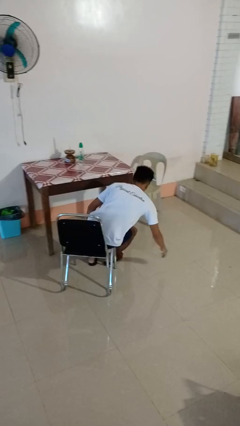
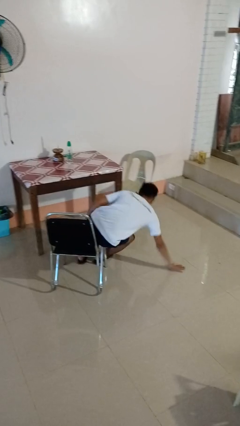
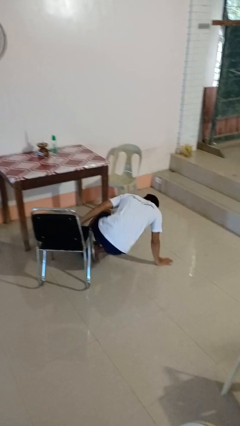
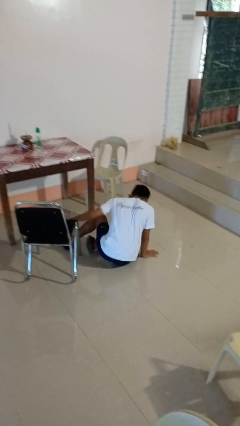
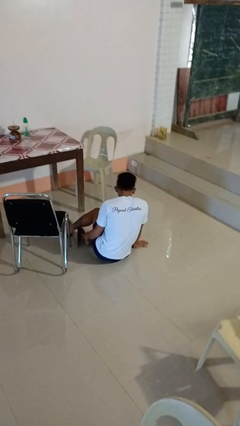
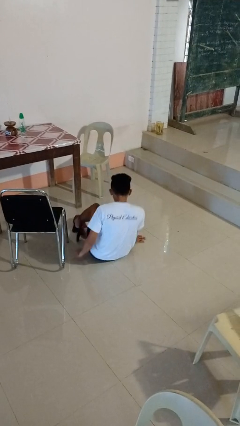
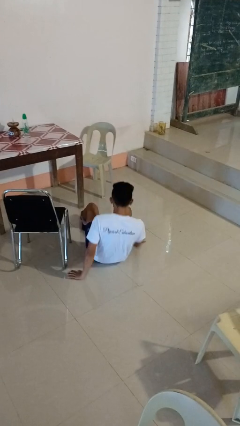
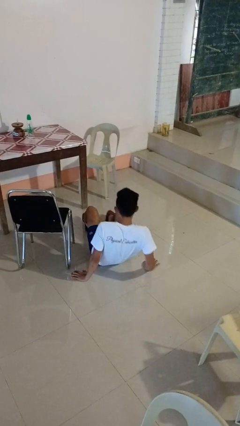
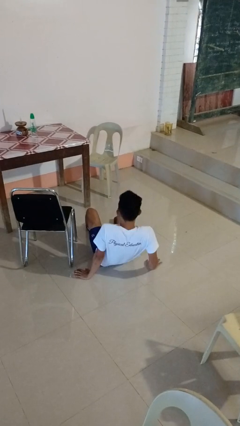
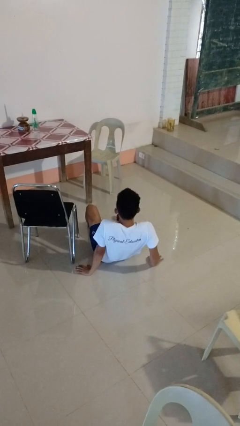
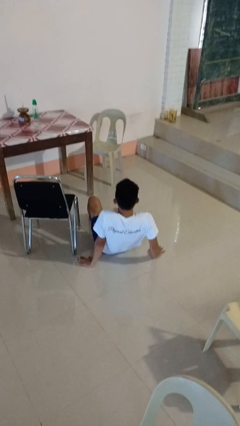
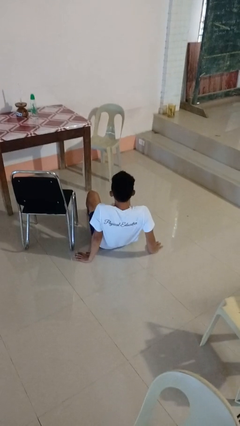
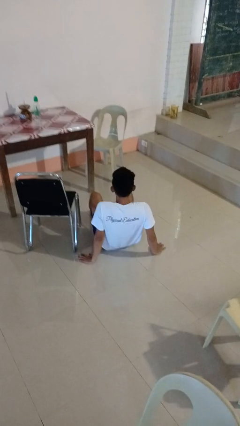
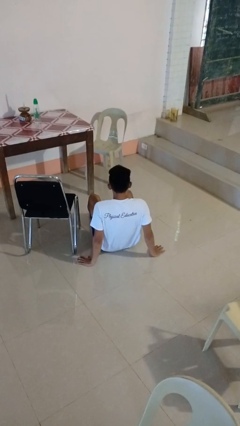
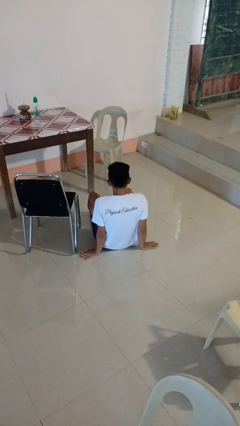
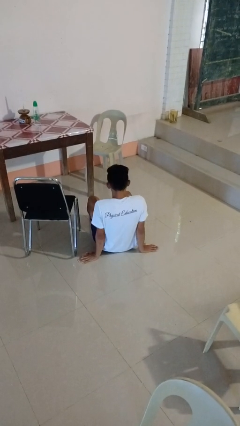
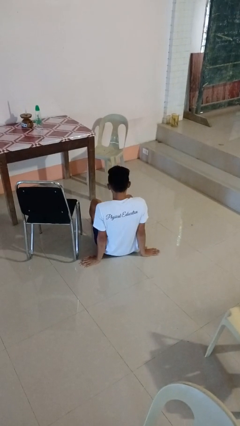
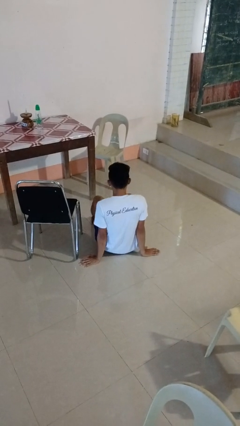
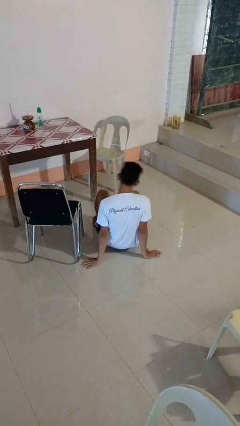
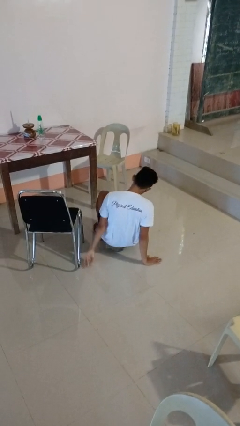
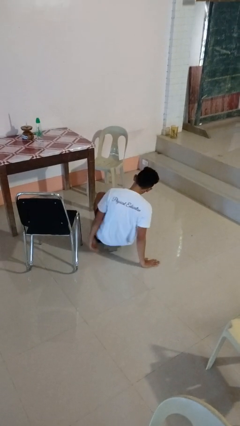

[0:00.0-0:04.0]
person falls from chair

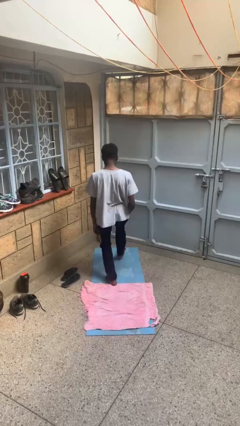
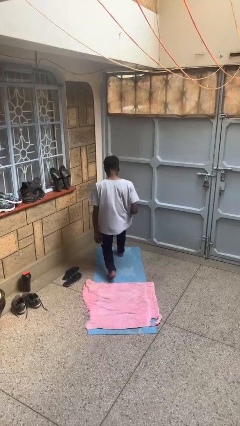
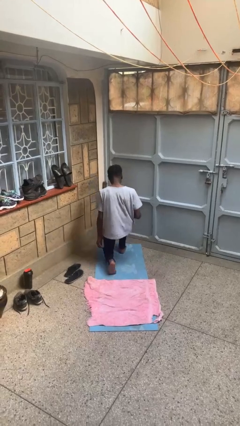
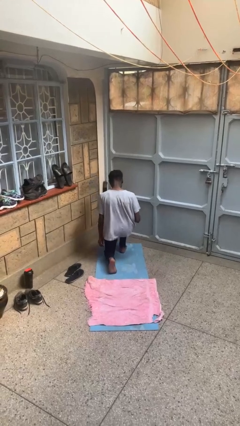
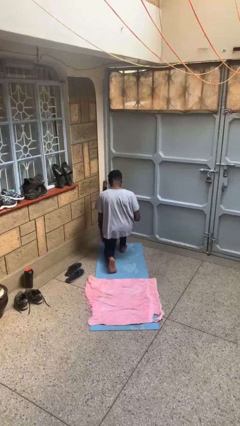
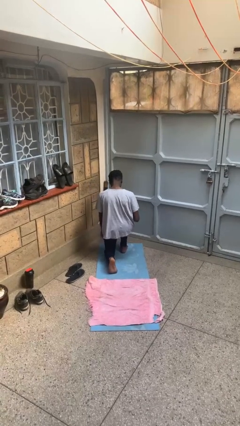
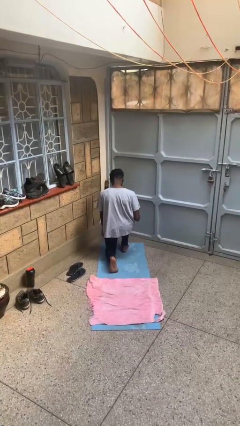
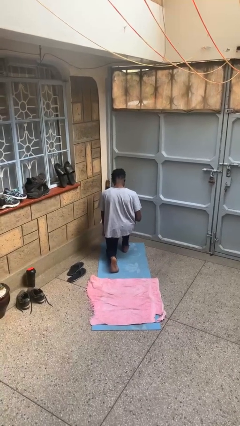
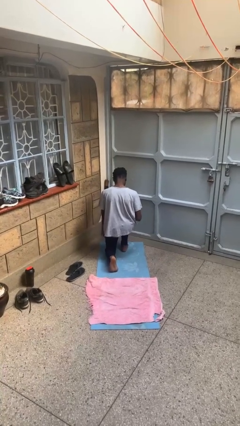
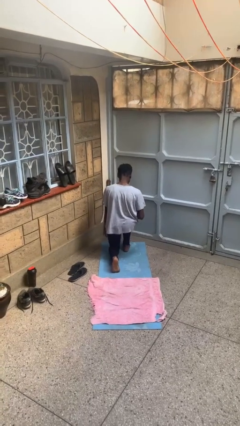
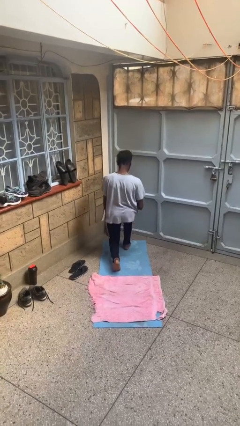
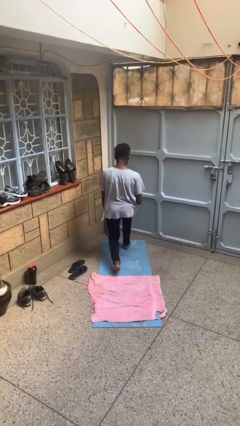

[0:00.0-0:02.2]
person exercises with lunges

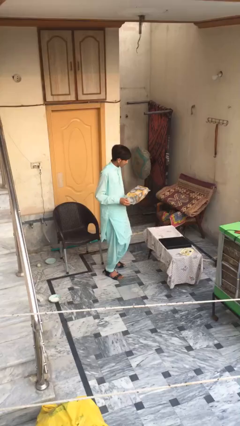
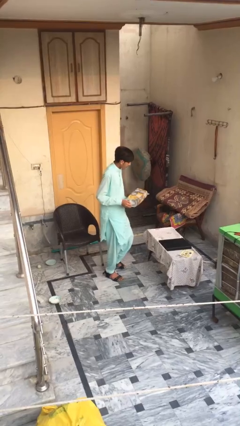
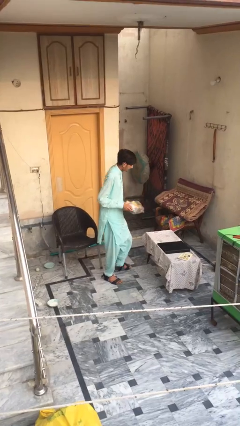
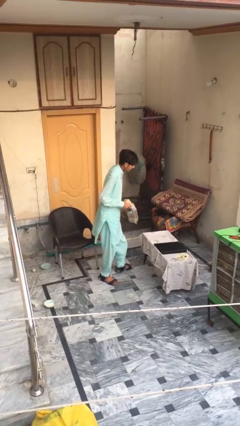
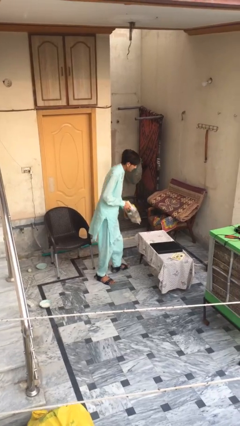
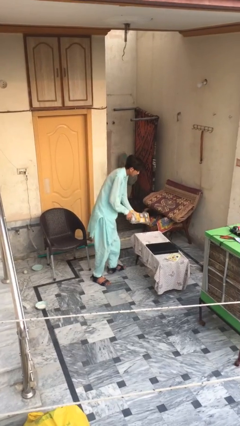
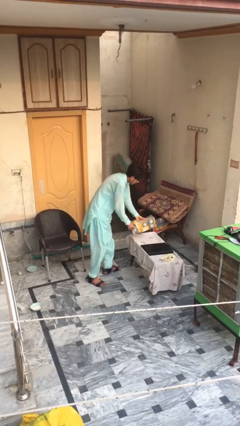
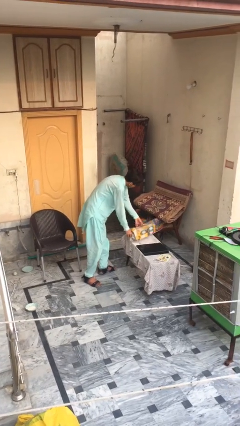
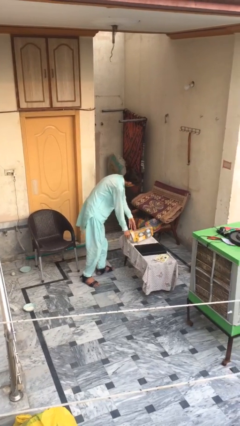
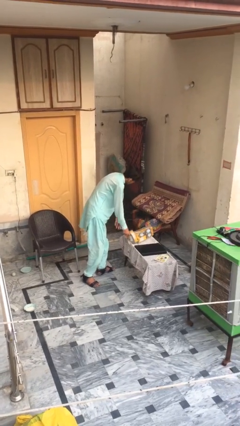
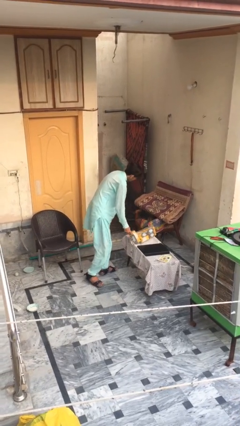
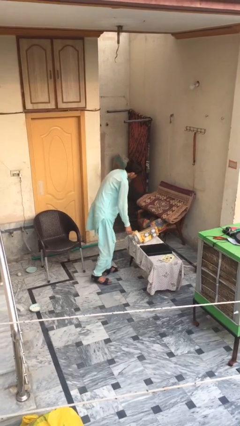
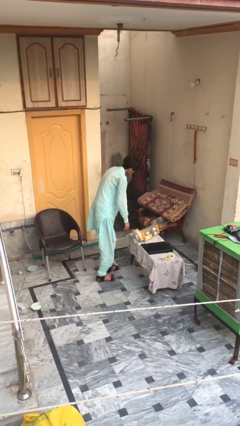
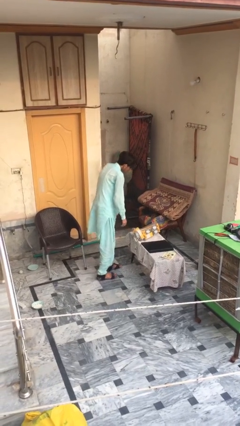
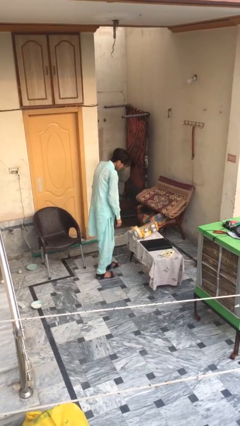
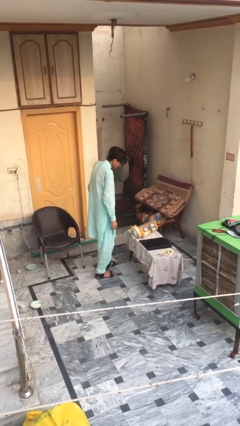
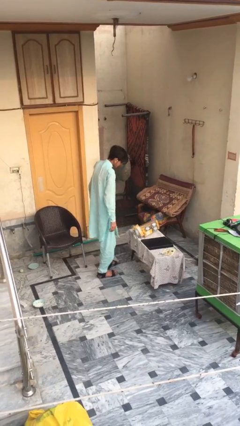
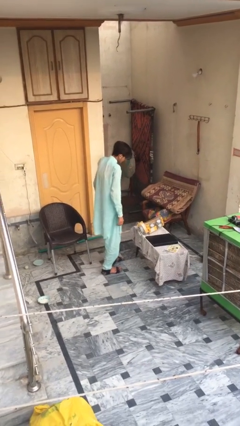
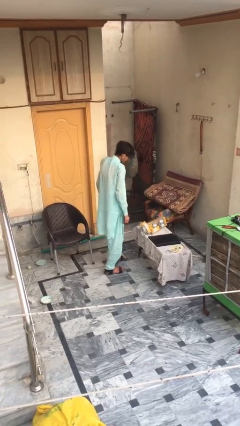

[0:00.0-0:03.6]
person puts down object on table

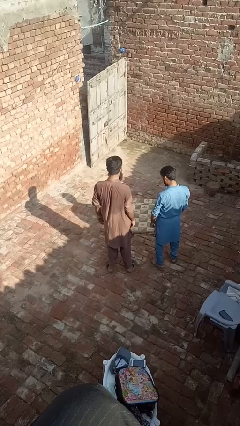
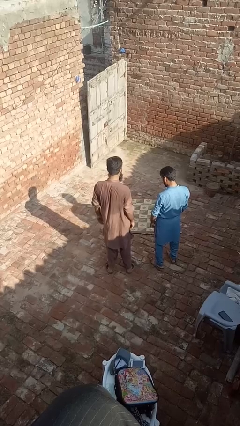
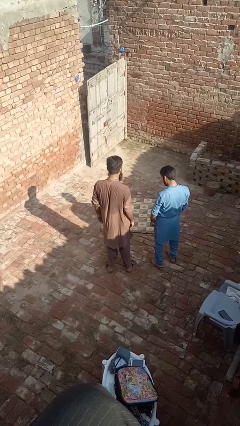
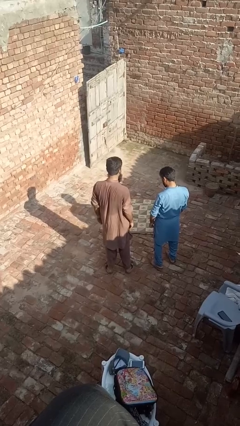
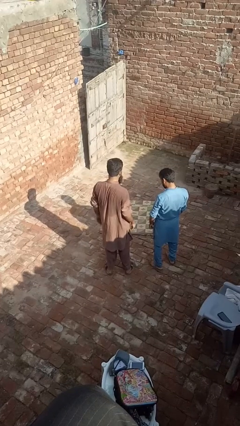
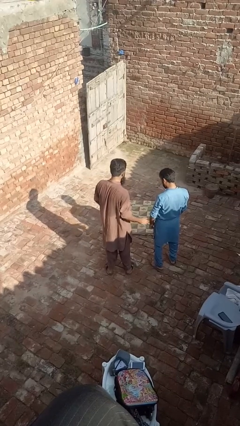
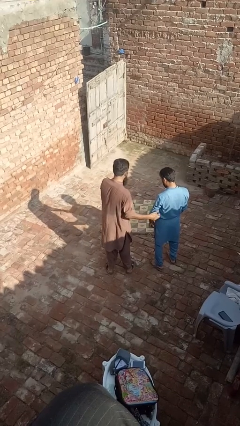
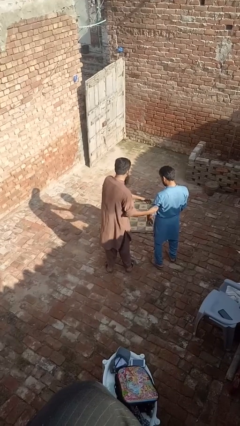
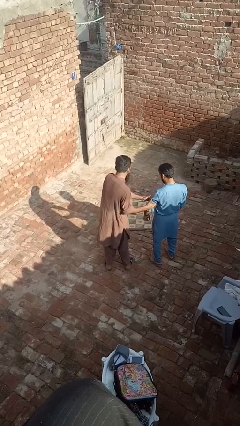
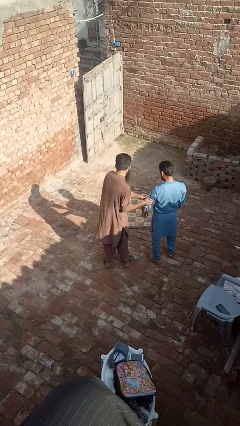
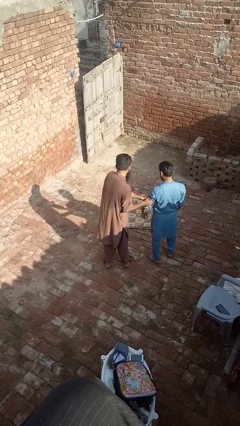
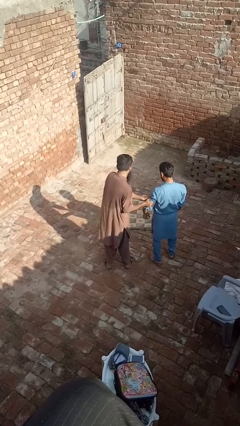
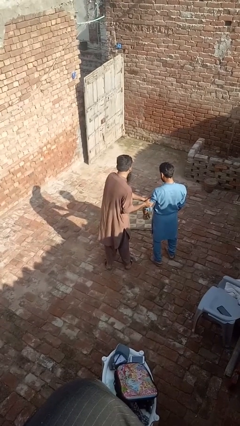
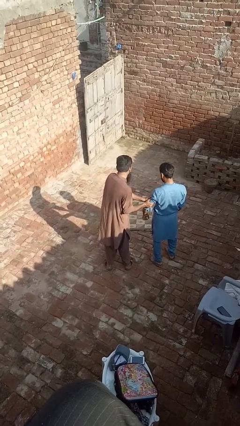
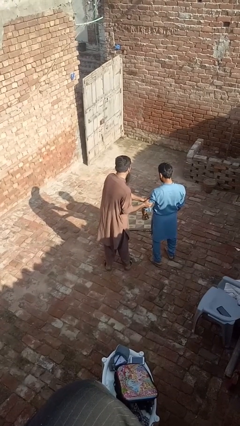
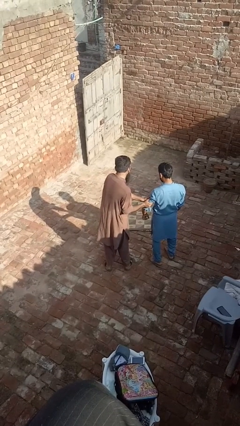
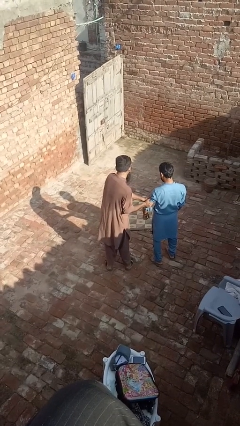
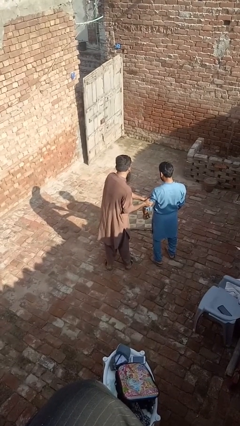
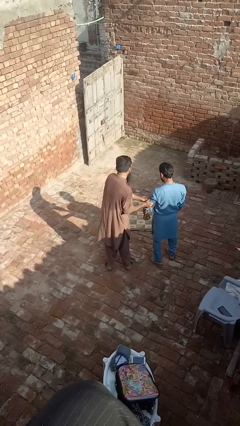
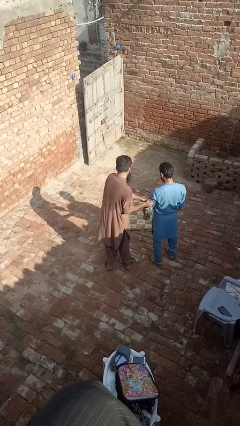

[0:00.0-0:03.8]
person grabs person by bicep

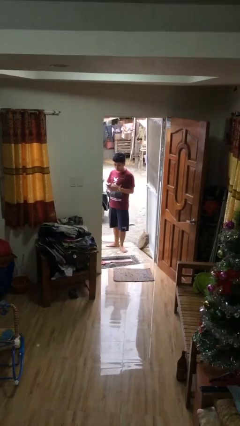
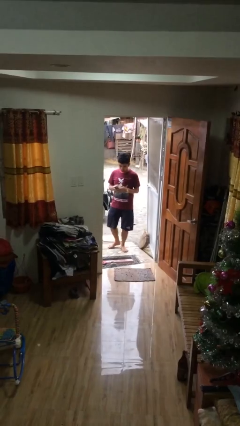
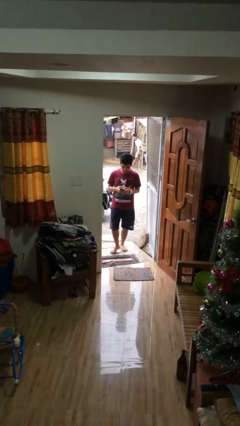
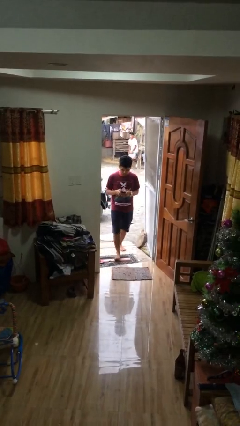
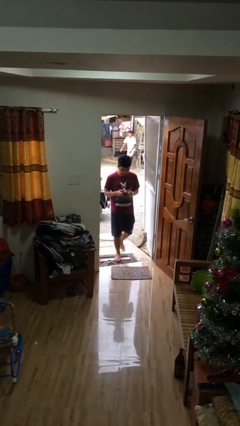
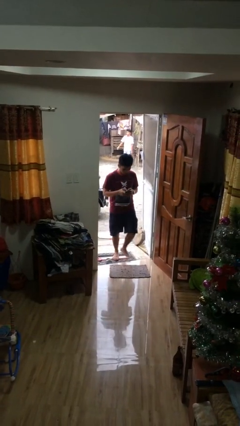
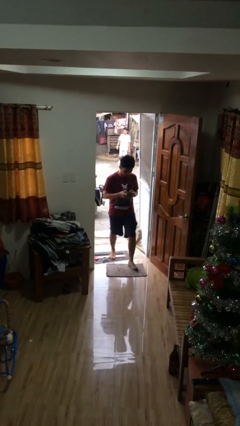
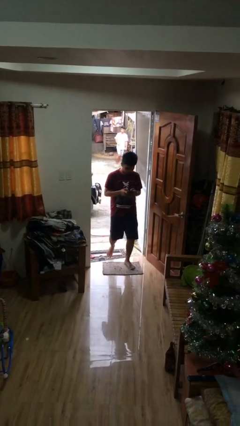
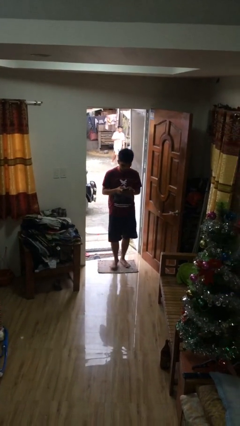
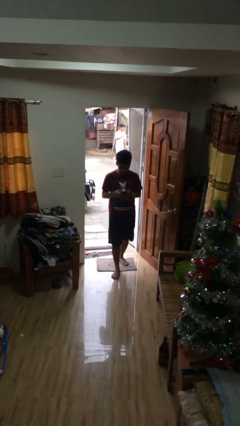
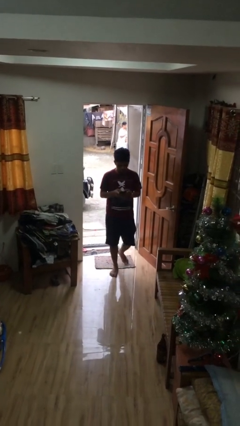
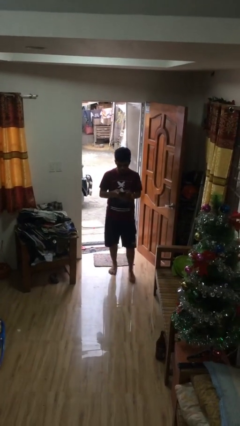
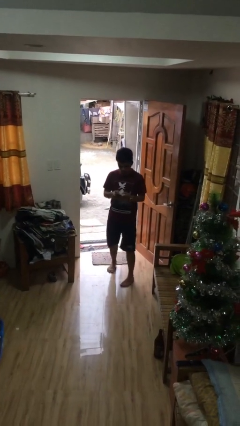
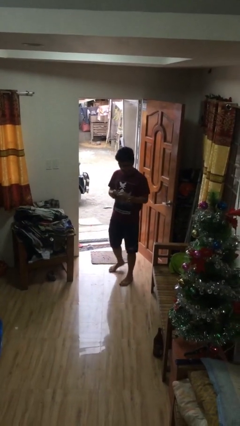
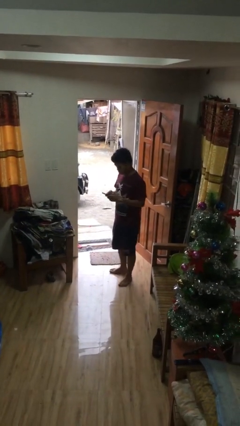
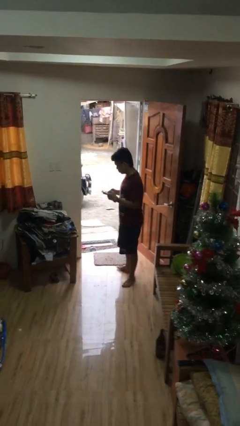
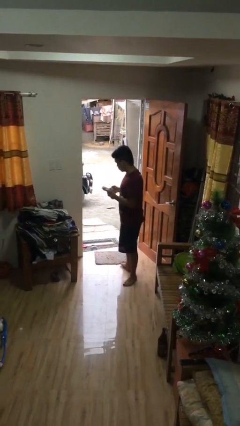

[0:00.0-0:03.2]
person enters scene through structure

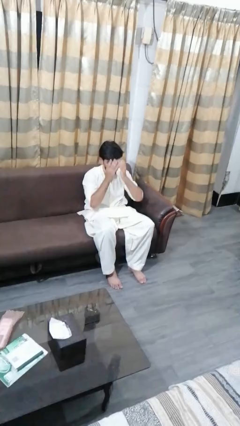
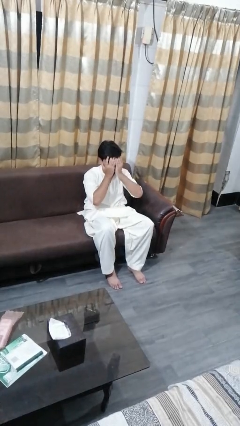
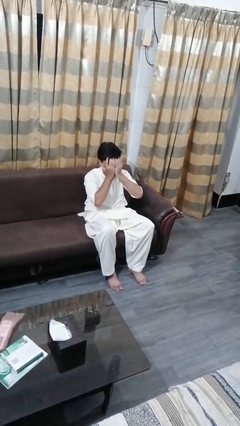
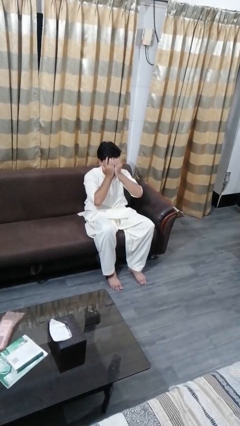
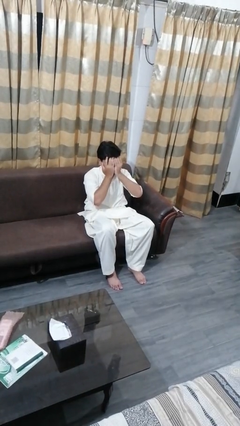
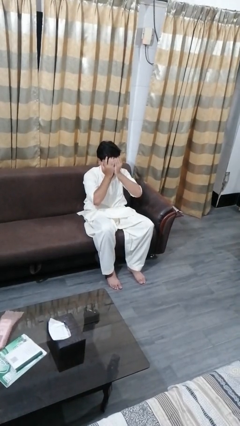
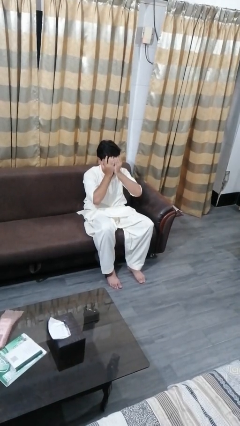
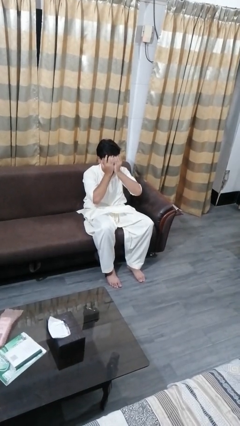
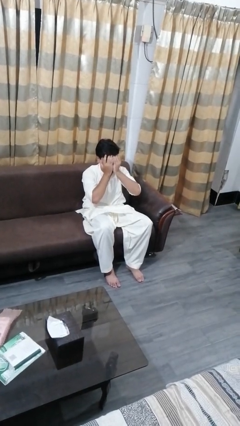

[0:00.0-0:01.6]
person covers face with hands
